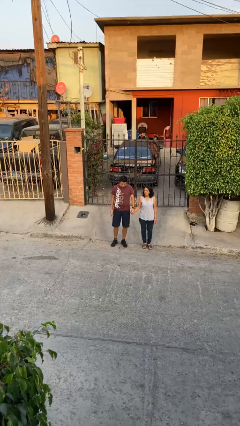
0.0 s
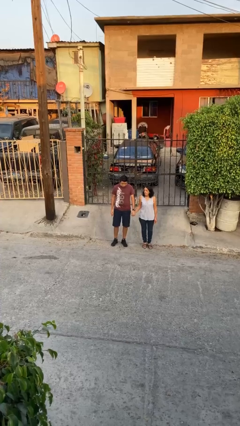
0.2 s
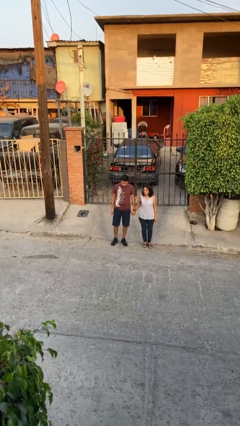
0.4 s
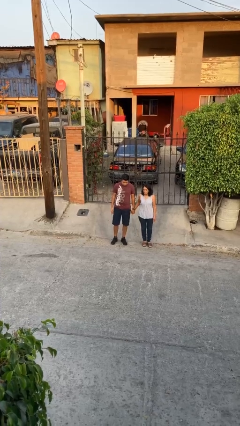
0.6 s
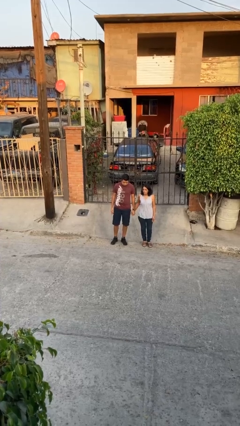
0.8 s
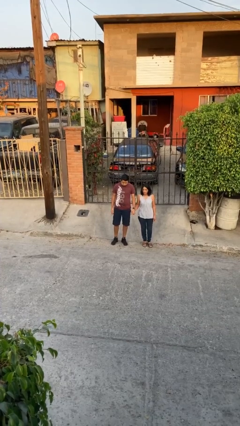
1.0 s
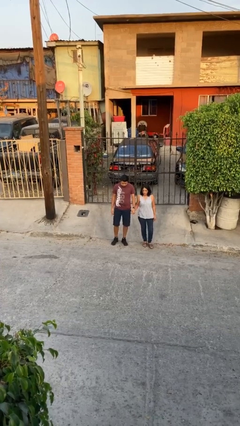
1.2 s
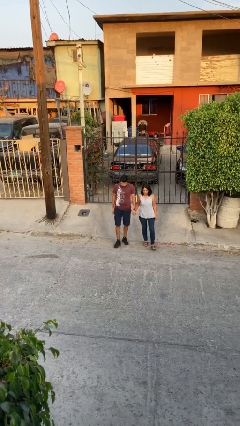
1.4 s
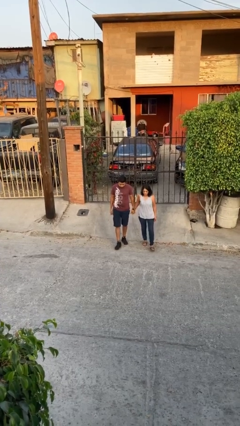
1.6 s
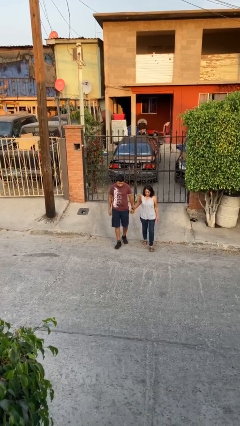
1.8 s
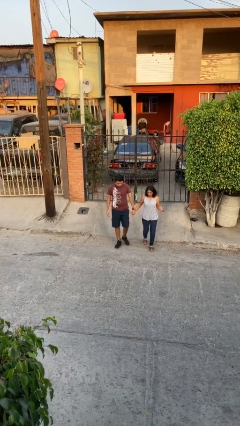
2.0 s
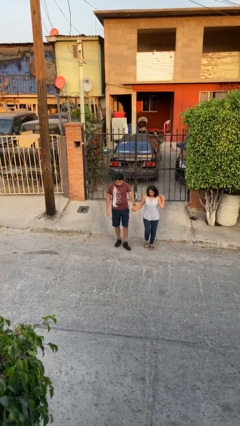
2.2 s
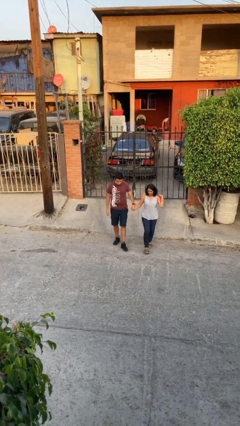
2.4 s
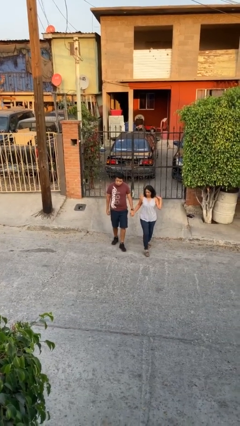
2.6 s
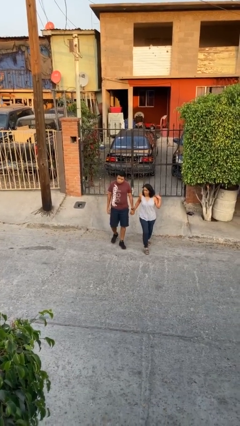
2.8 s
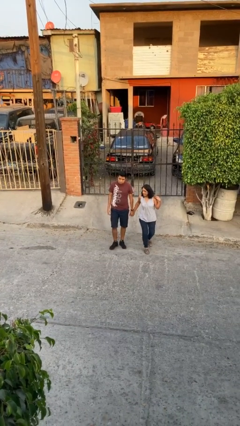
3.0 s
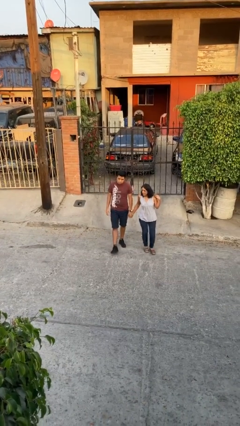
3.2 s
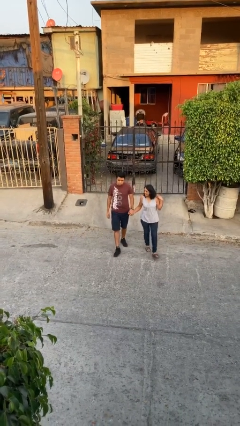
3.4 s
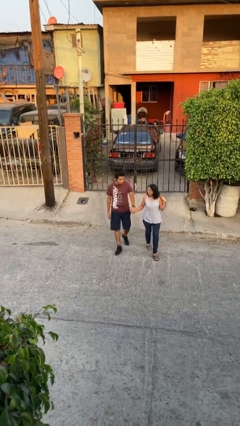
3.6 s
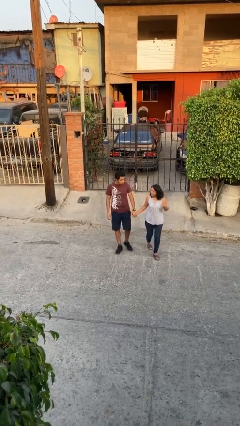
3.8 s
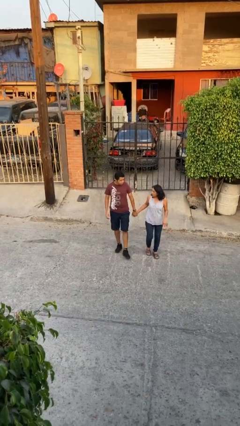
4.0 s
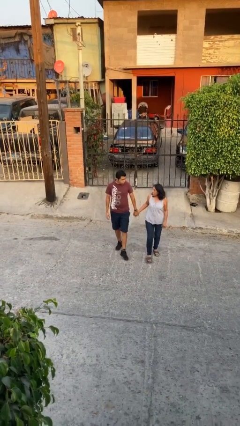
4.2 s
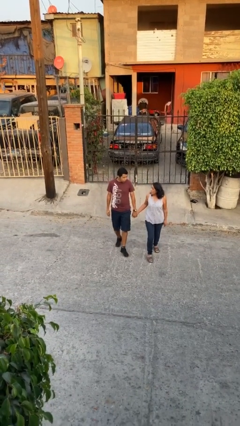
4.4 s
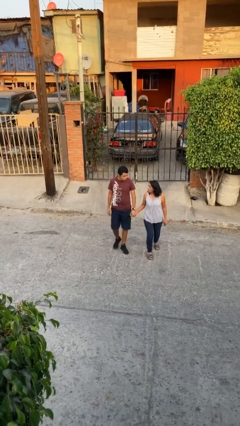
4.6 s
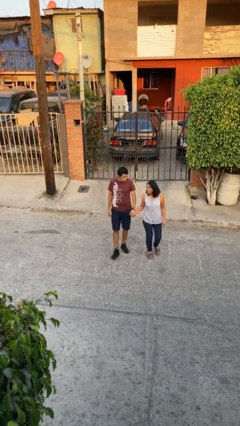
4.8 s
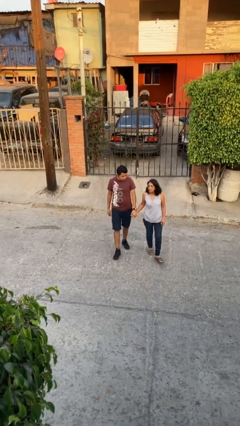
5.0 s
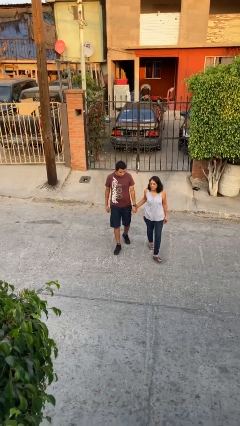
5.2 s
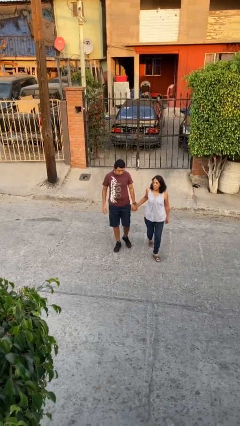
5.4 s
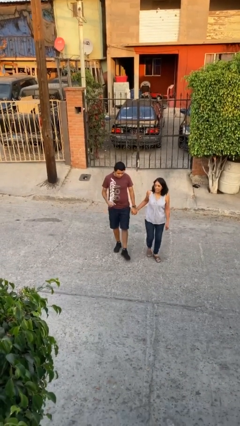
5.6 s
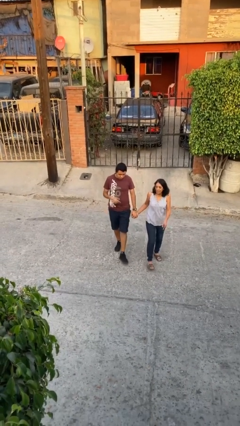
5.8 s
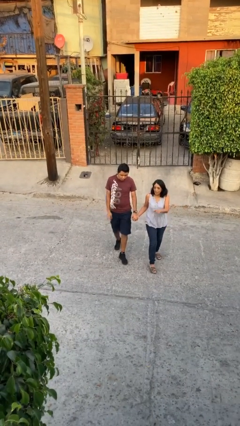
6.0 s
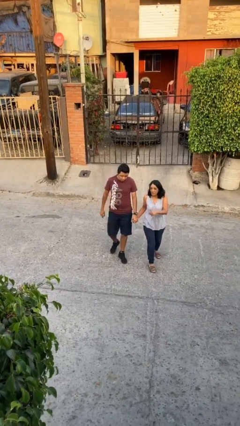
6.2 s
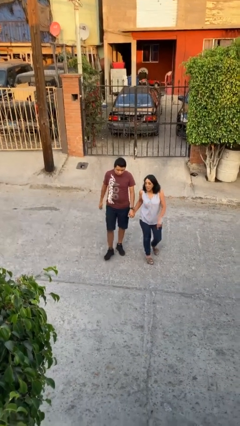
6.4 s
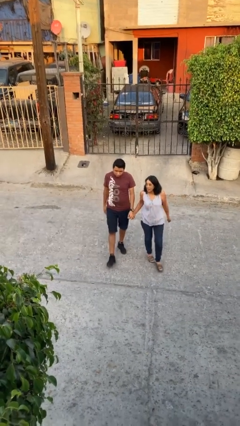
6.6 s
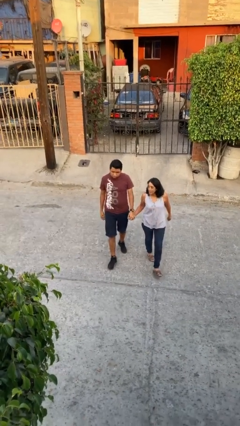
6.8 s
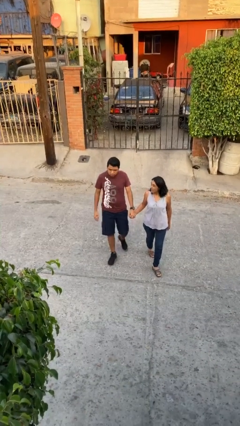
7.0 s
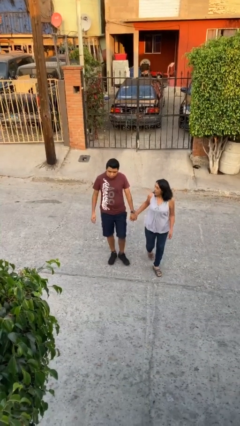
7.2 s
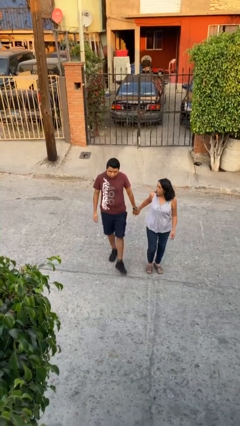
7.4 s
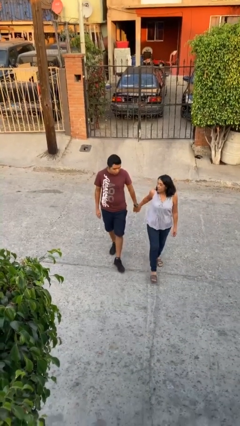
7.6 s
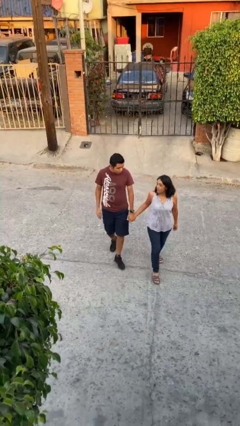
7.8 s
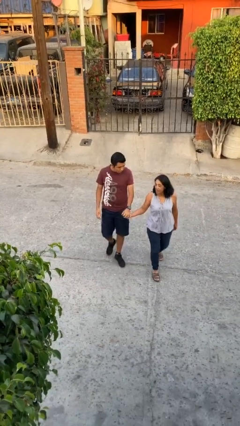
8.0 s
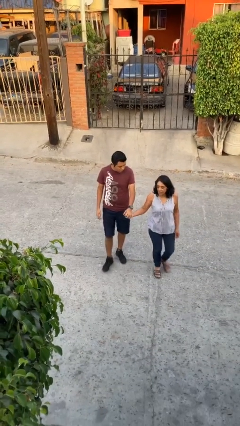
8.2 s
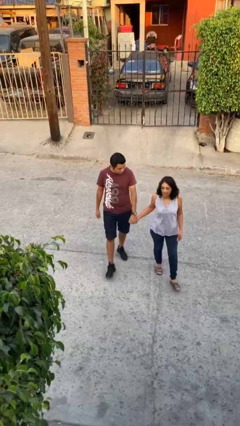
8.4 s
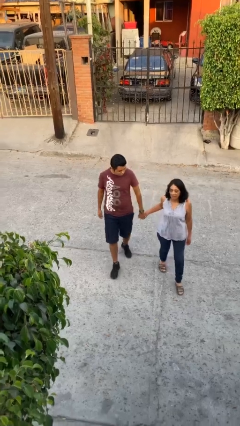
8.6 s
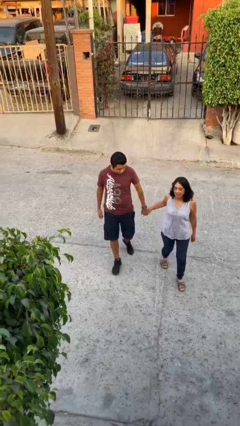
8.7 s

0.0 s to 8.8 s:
person holds hand

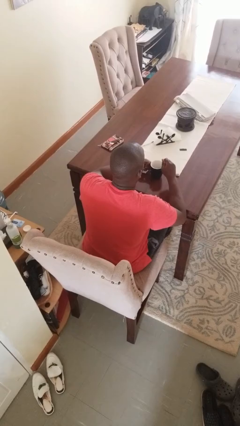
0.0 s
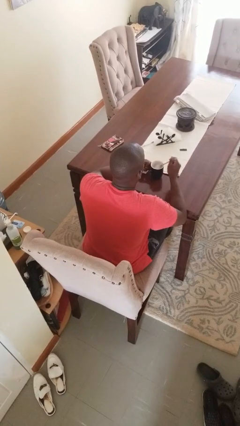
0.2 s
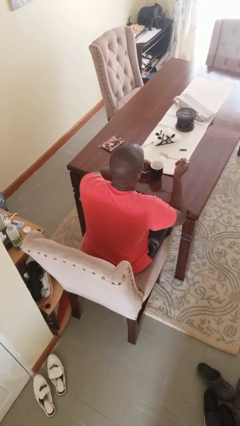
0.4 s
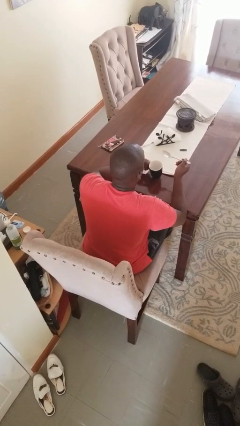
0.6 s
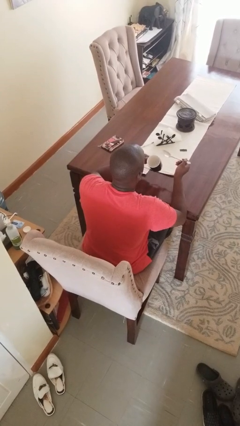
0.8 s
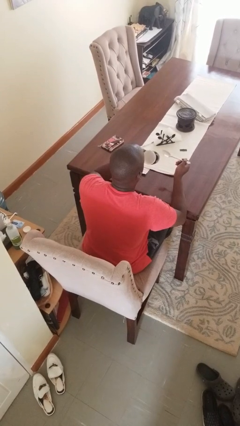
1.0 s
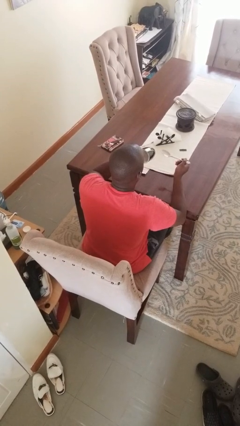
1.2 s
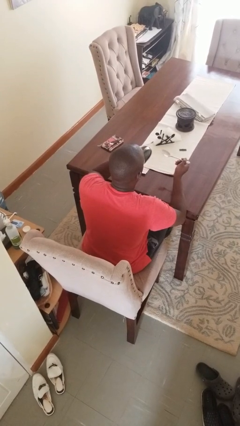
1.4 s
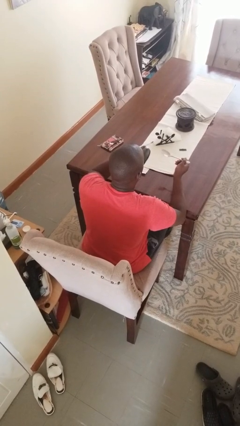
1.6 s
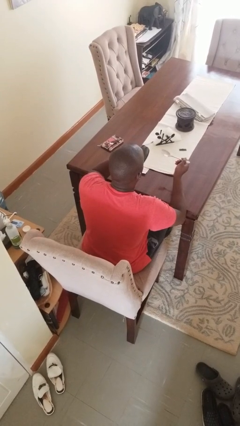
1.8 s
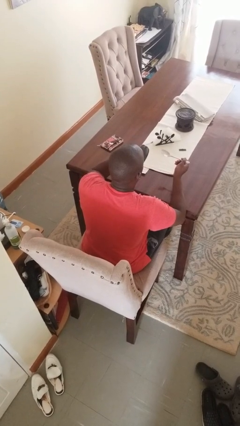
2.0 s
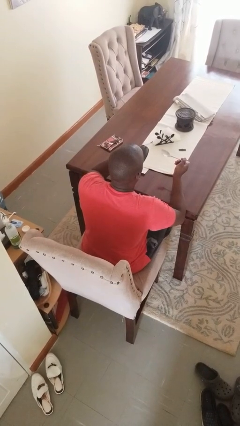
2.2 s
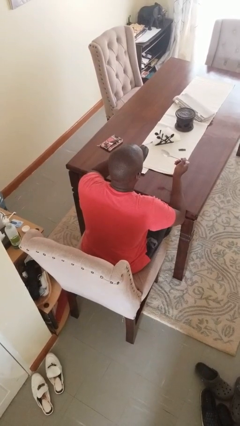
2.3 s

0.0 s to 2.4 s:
person drinks from mug

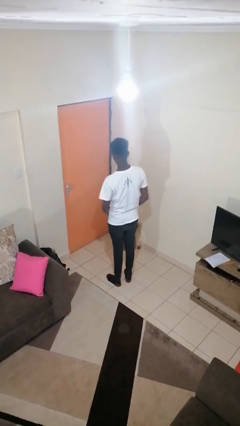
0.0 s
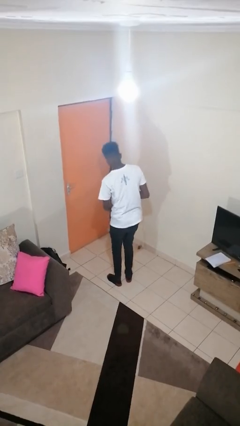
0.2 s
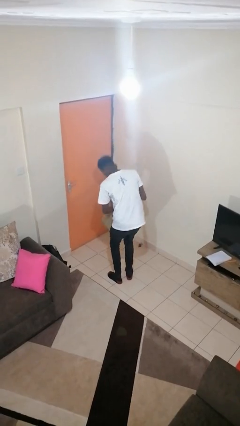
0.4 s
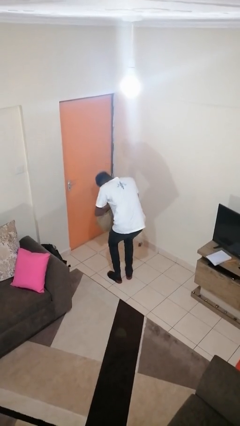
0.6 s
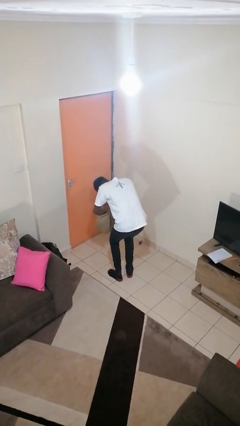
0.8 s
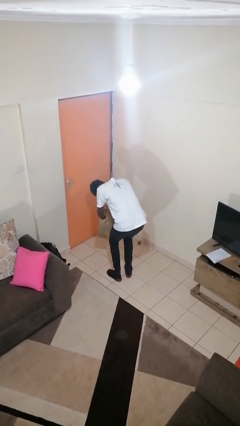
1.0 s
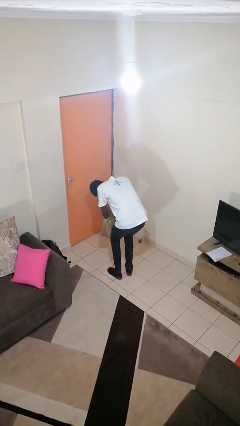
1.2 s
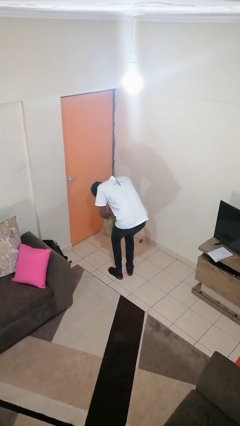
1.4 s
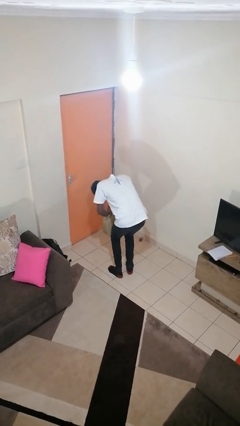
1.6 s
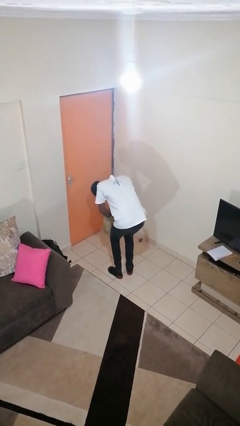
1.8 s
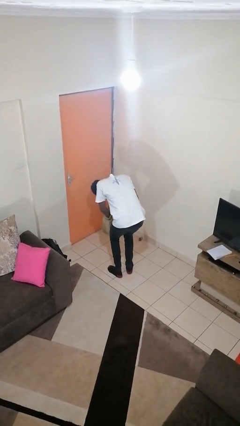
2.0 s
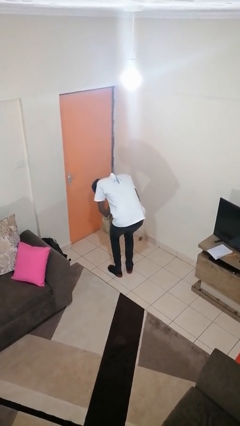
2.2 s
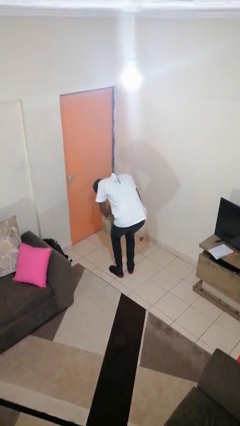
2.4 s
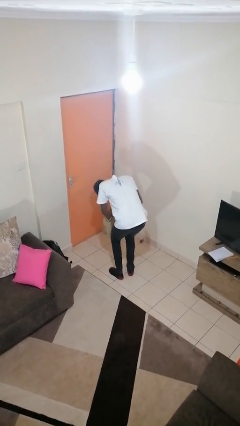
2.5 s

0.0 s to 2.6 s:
person searches in bag

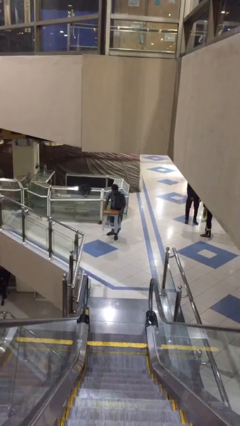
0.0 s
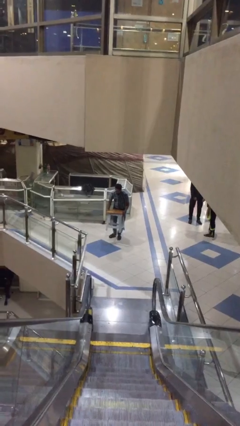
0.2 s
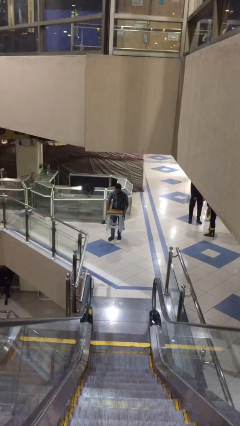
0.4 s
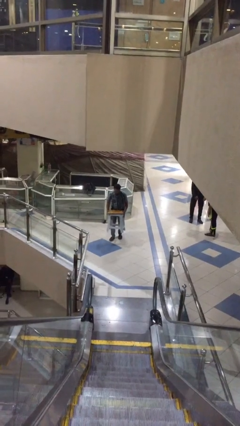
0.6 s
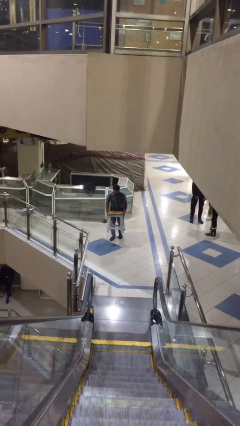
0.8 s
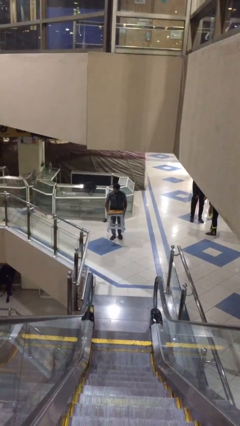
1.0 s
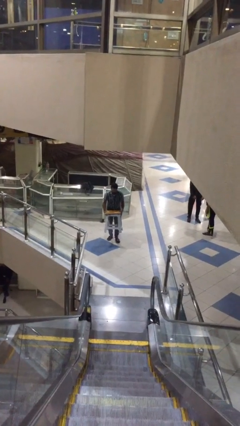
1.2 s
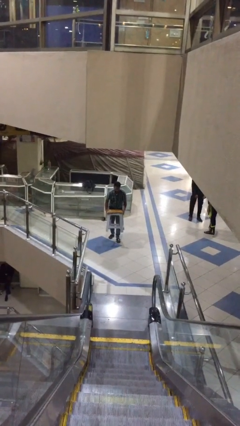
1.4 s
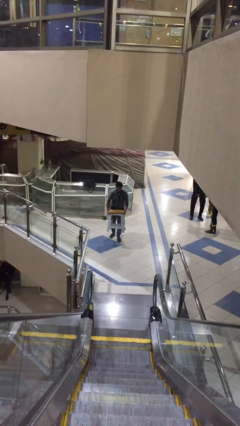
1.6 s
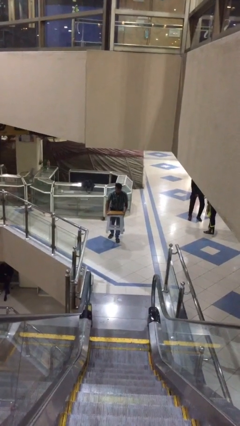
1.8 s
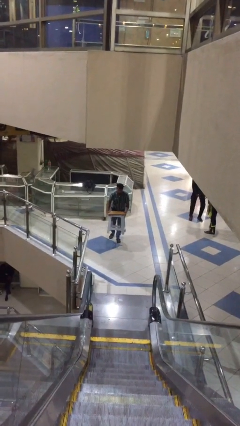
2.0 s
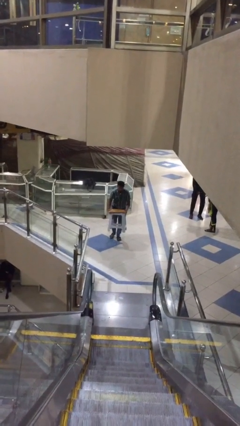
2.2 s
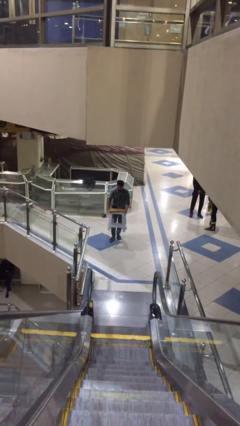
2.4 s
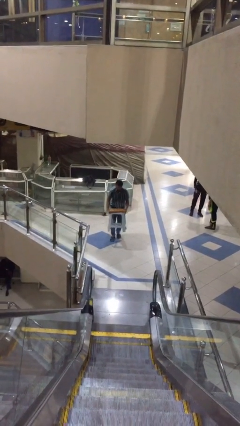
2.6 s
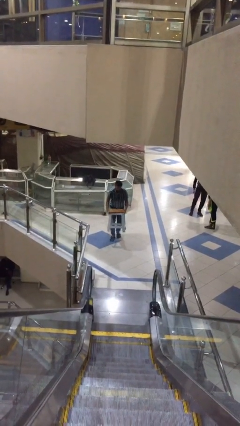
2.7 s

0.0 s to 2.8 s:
person carries heavy object

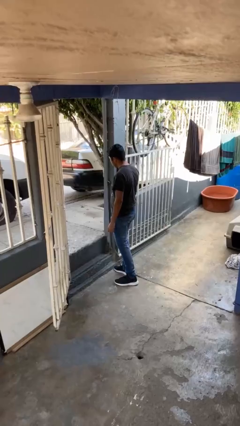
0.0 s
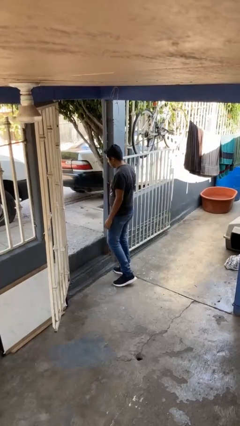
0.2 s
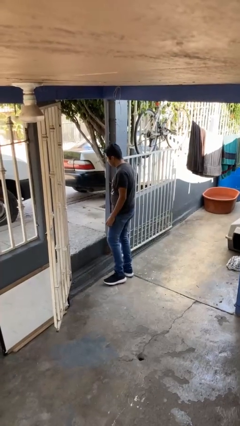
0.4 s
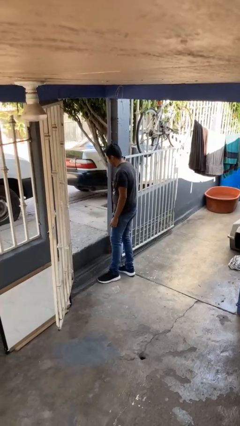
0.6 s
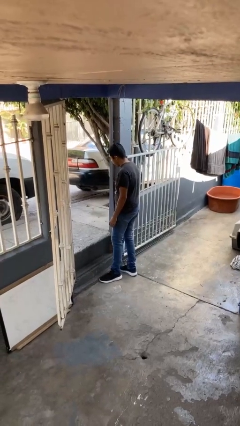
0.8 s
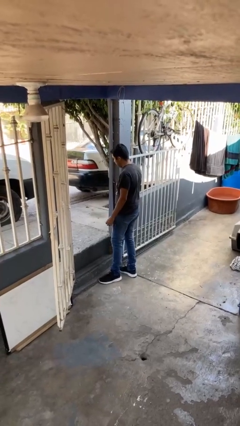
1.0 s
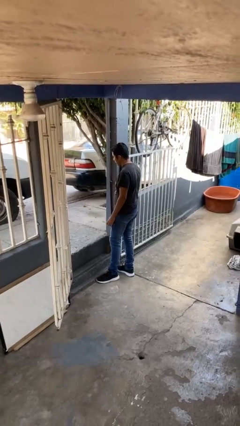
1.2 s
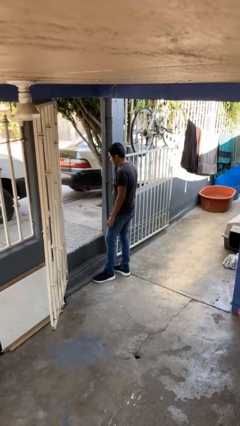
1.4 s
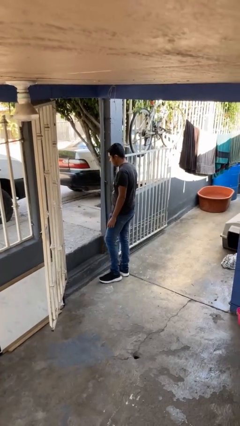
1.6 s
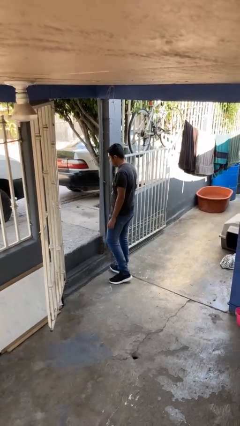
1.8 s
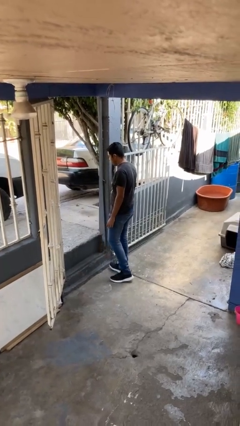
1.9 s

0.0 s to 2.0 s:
person bumps into wall
